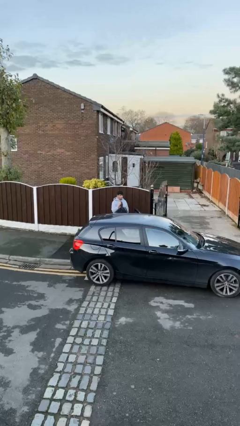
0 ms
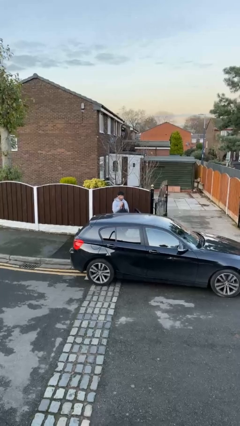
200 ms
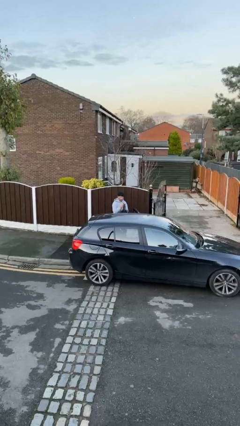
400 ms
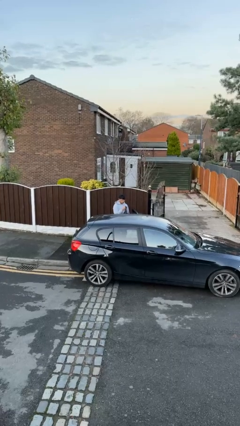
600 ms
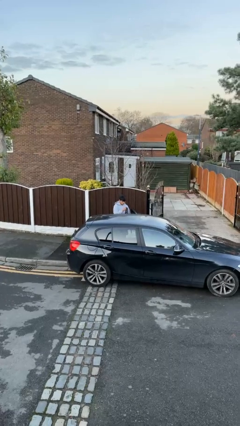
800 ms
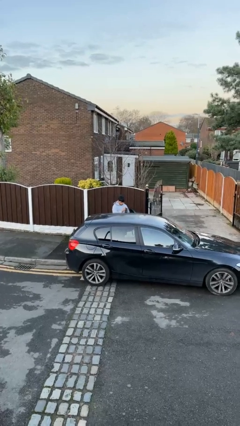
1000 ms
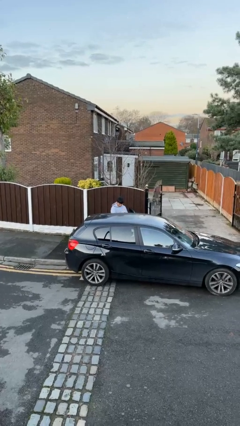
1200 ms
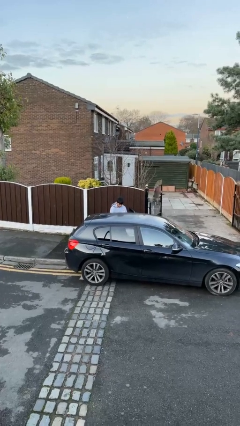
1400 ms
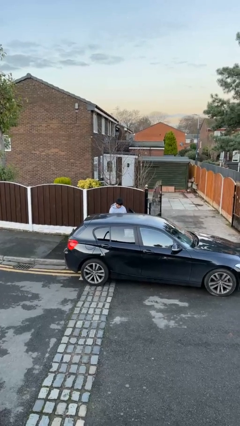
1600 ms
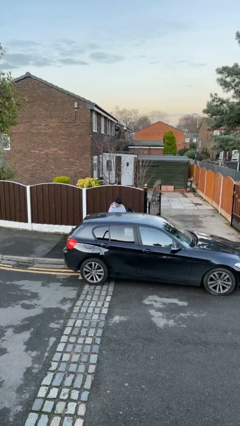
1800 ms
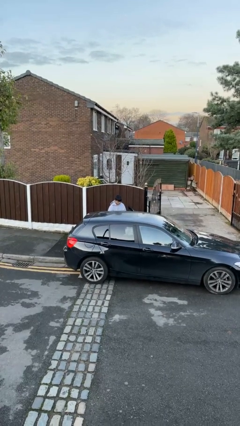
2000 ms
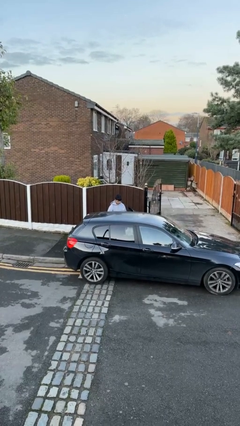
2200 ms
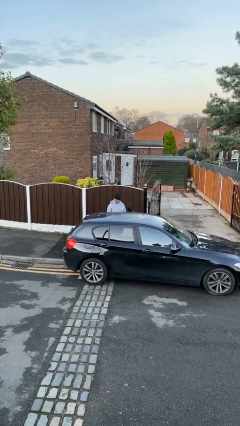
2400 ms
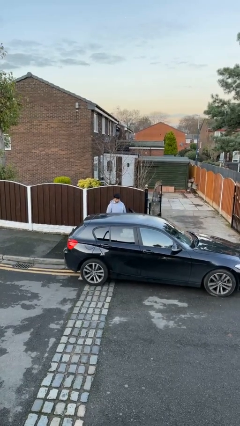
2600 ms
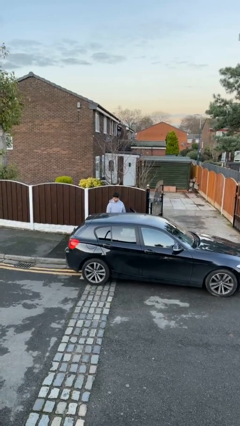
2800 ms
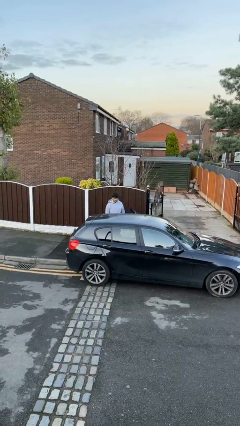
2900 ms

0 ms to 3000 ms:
person loads car

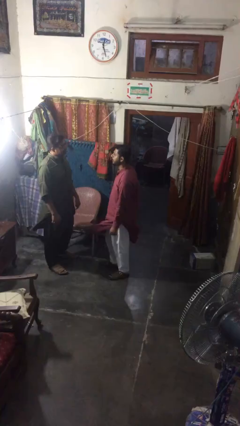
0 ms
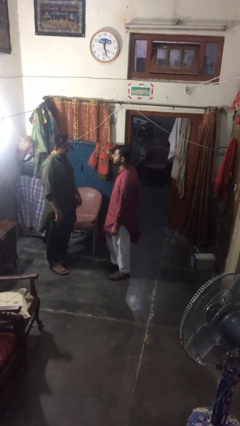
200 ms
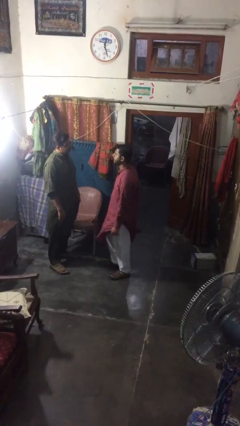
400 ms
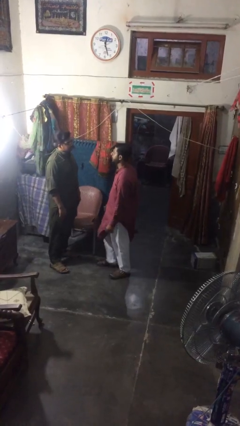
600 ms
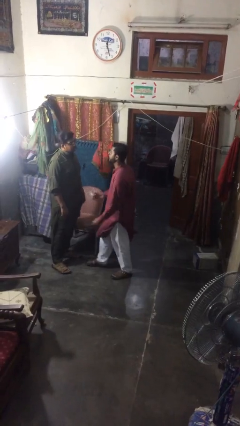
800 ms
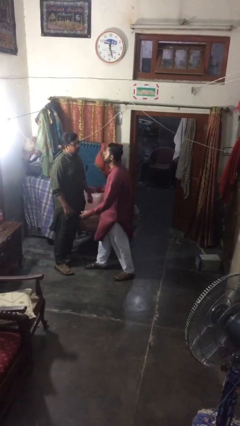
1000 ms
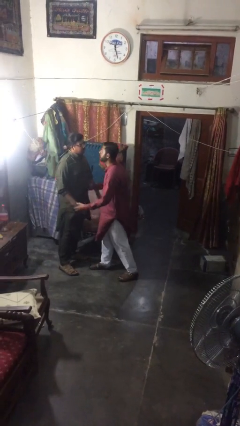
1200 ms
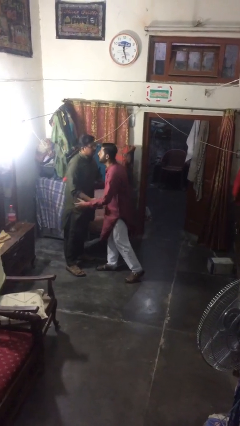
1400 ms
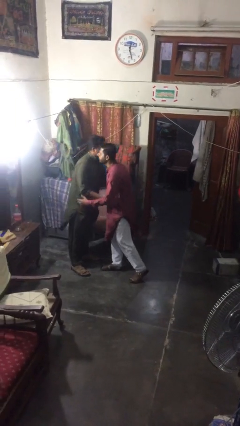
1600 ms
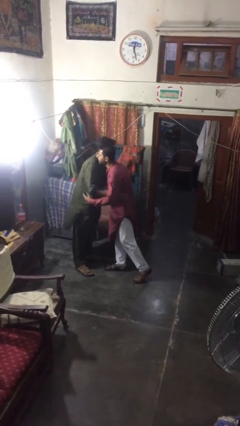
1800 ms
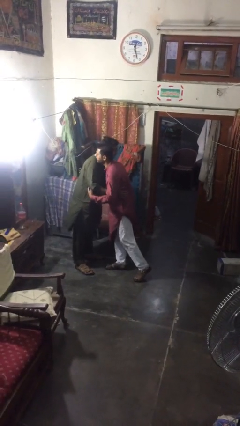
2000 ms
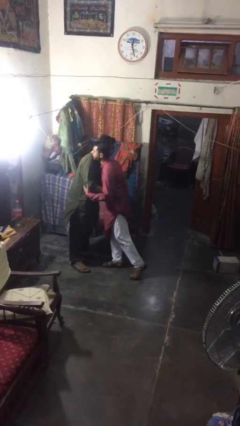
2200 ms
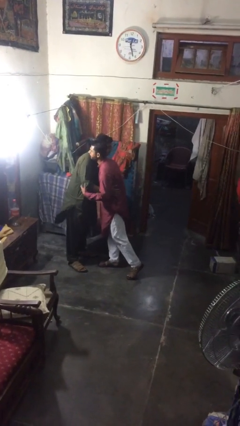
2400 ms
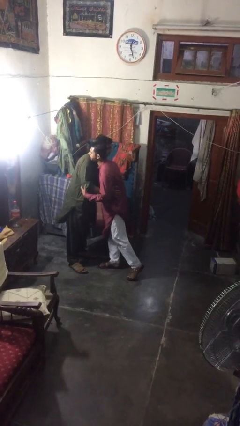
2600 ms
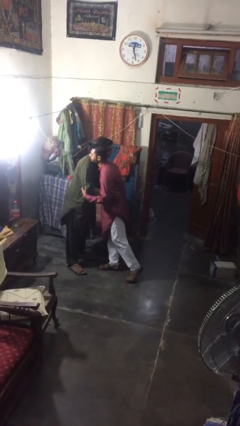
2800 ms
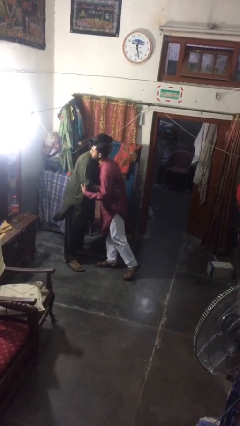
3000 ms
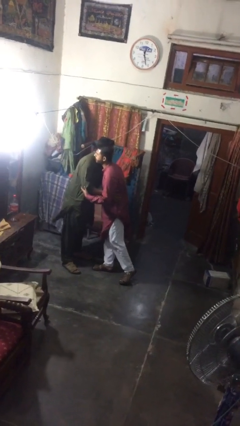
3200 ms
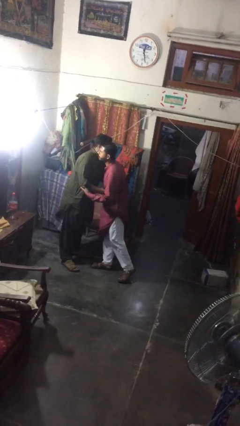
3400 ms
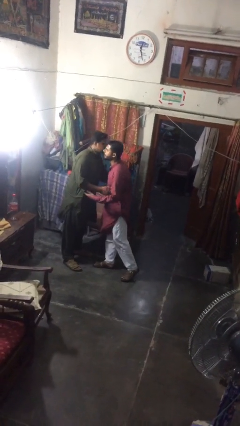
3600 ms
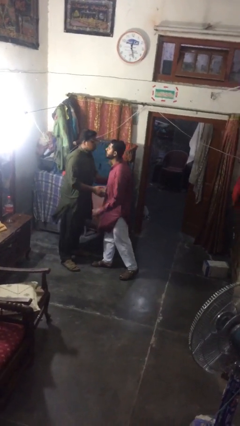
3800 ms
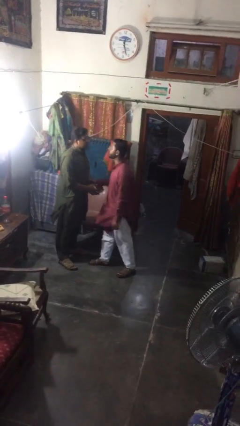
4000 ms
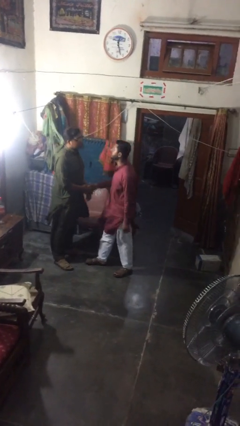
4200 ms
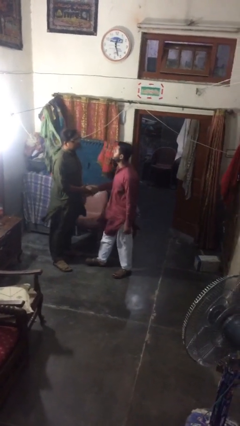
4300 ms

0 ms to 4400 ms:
person embraces person

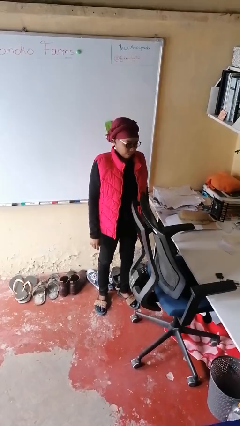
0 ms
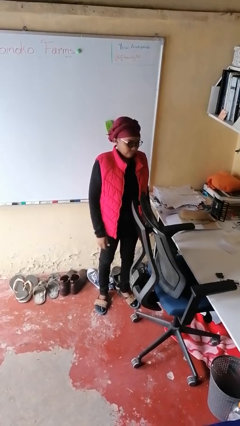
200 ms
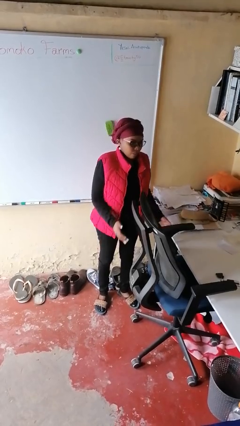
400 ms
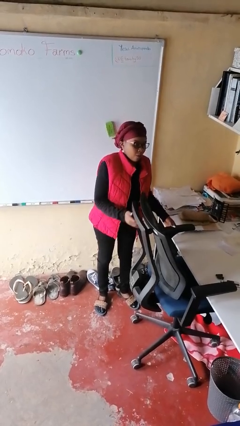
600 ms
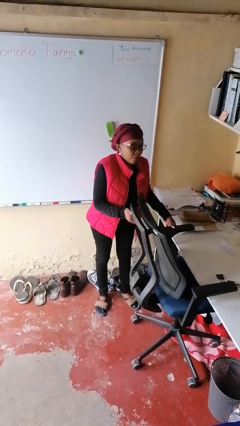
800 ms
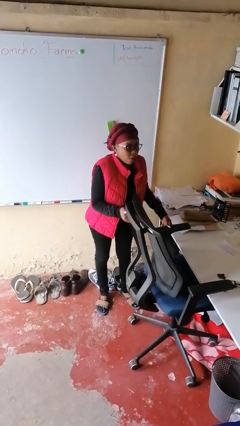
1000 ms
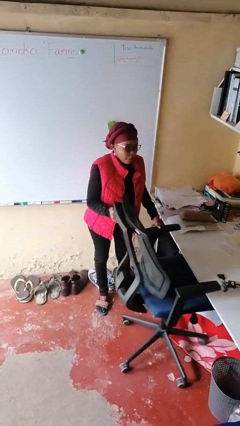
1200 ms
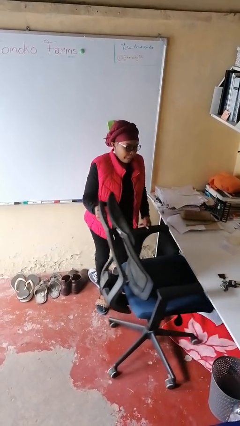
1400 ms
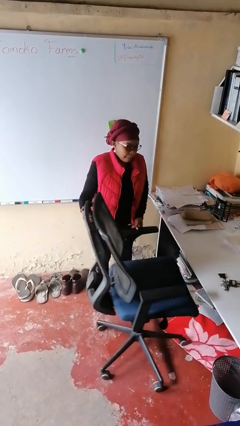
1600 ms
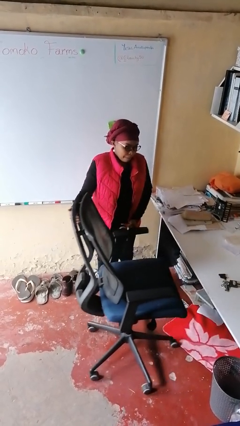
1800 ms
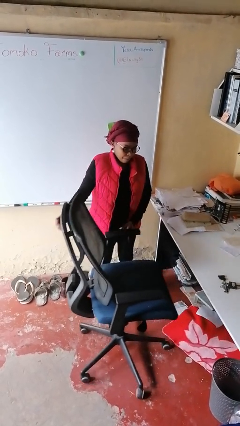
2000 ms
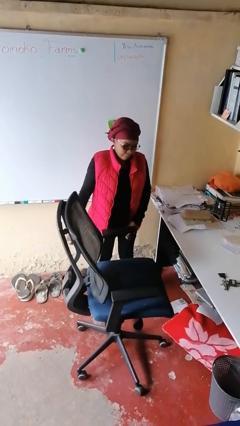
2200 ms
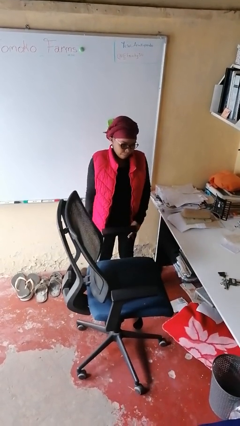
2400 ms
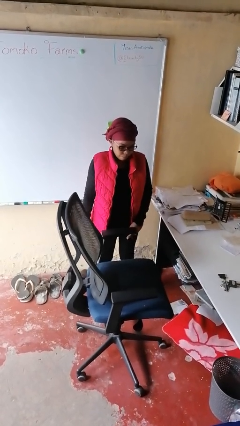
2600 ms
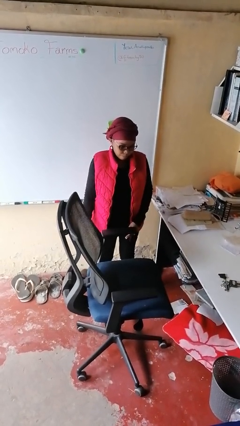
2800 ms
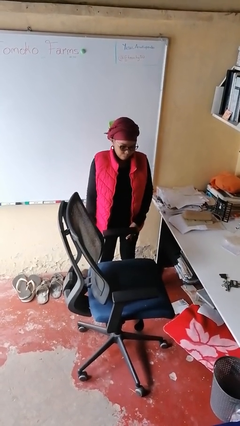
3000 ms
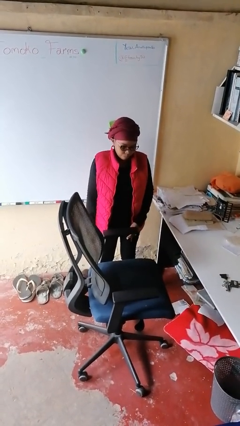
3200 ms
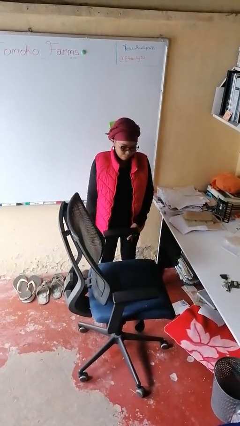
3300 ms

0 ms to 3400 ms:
person pulls out chair

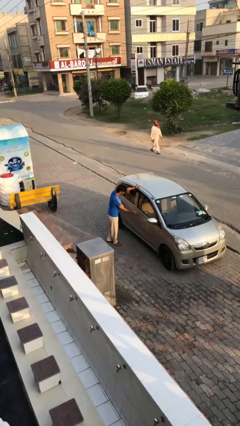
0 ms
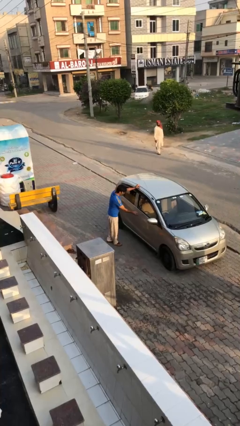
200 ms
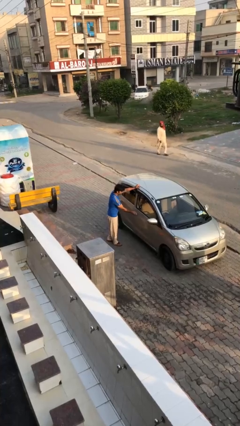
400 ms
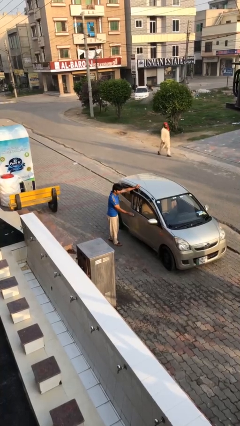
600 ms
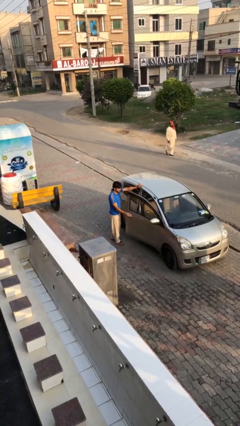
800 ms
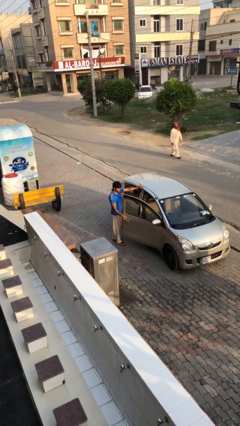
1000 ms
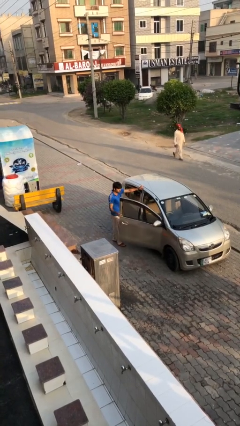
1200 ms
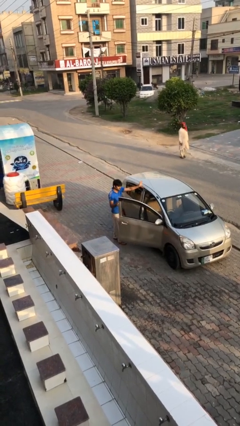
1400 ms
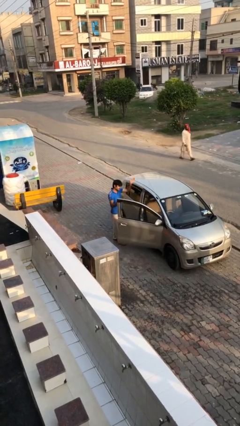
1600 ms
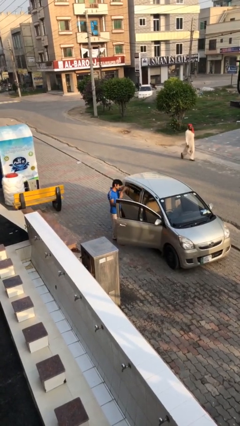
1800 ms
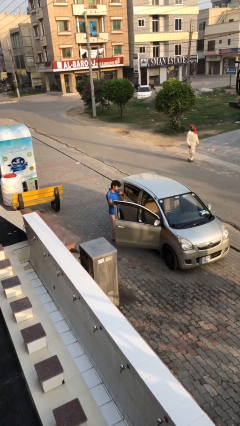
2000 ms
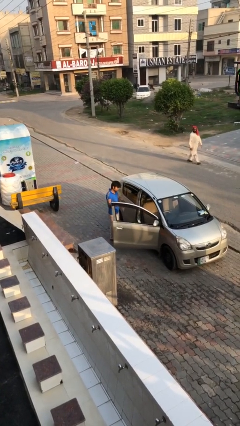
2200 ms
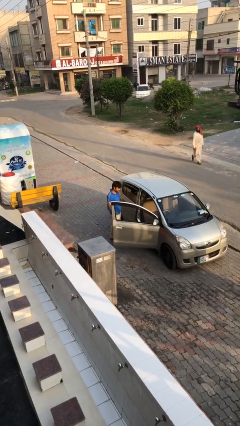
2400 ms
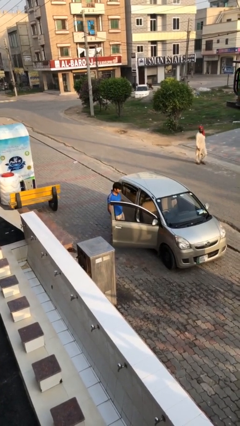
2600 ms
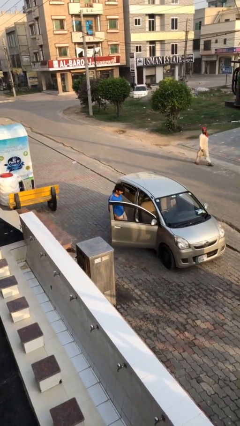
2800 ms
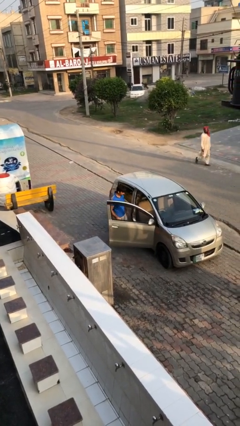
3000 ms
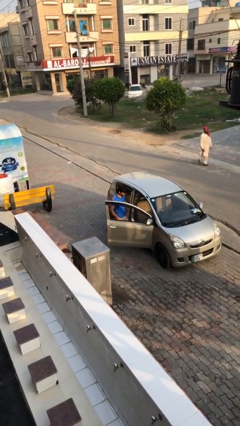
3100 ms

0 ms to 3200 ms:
person opens car door

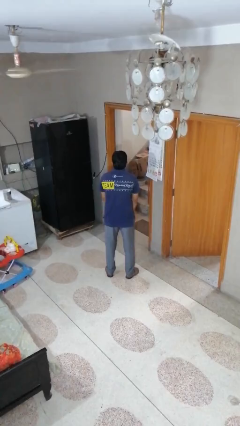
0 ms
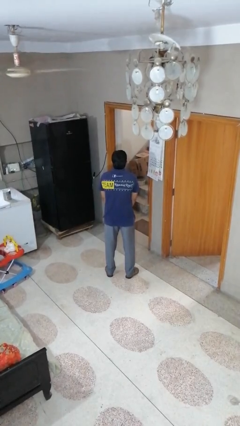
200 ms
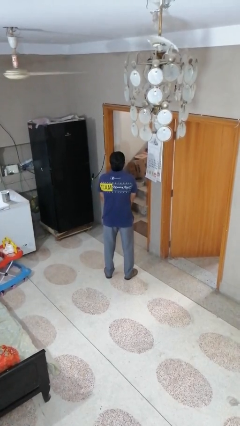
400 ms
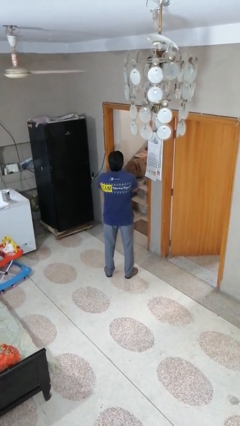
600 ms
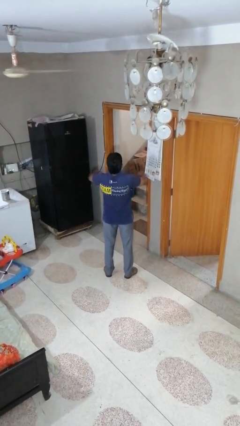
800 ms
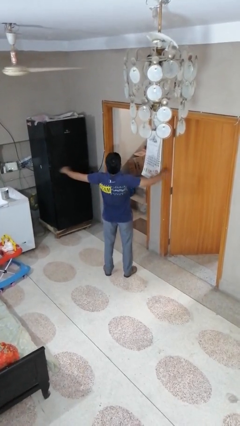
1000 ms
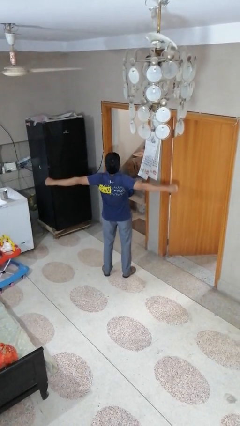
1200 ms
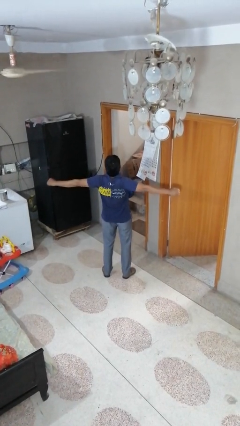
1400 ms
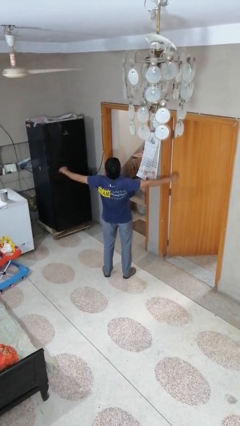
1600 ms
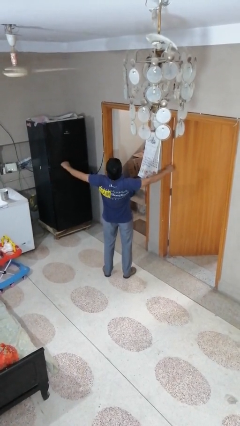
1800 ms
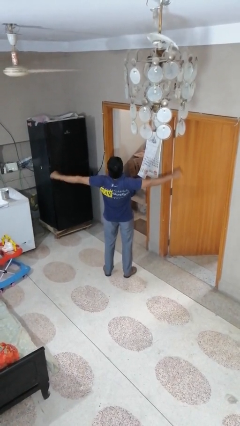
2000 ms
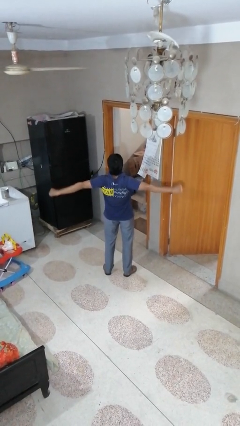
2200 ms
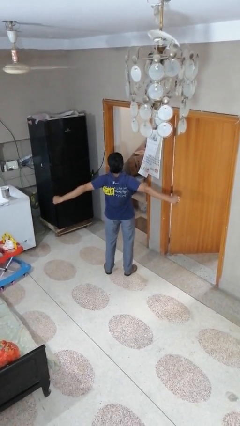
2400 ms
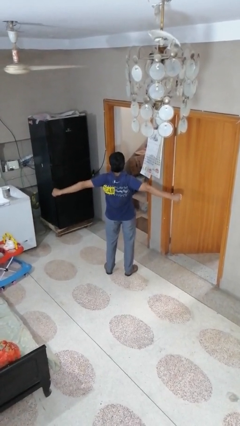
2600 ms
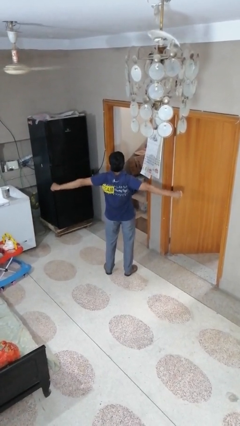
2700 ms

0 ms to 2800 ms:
person stretches arms to side

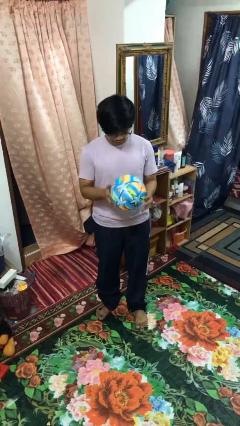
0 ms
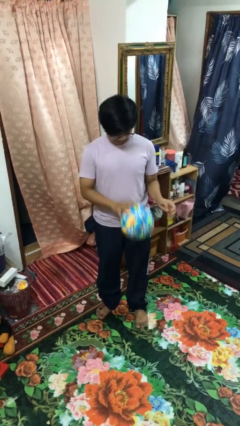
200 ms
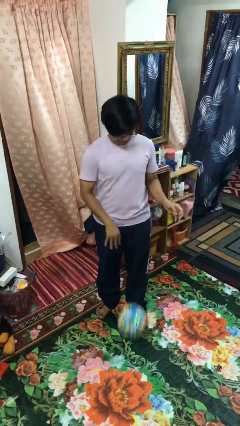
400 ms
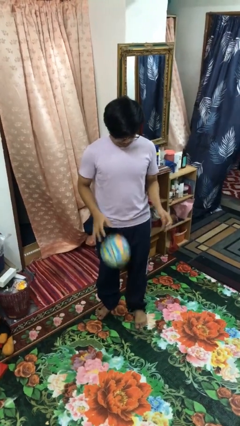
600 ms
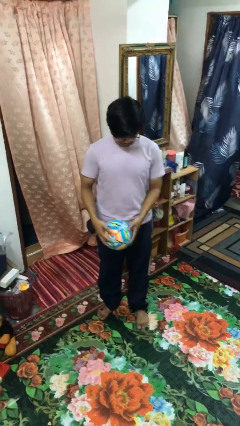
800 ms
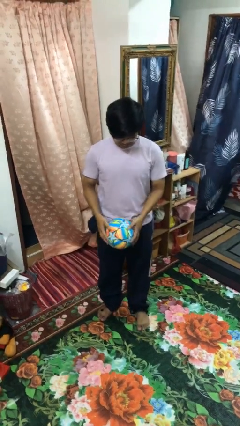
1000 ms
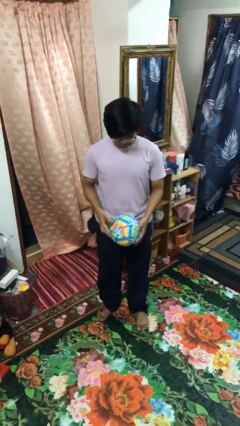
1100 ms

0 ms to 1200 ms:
person bounces ball on floor
